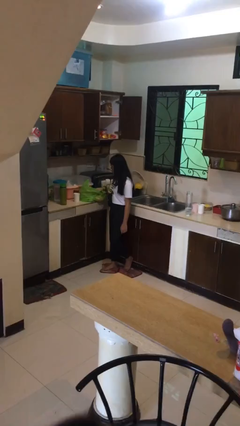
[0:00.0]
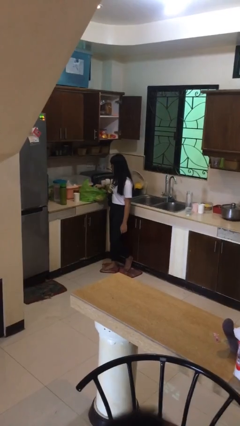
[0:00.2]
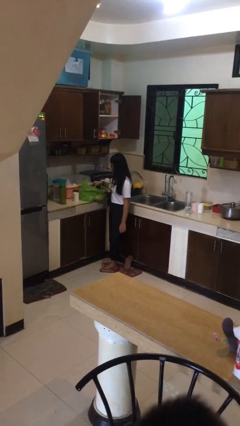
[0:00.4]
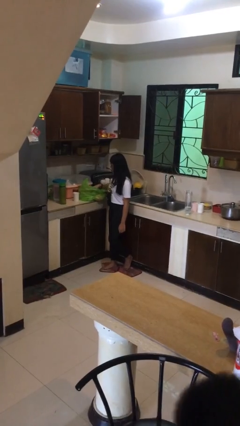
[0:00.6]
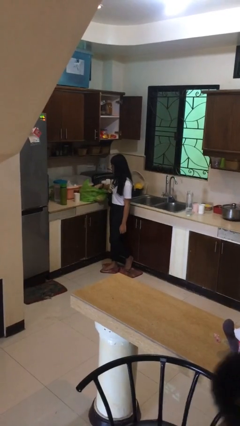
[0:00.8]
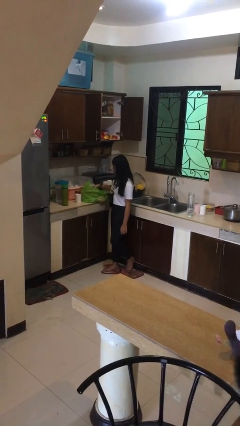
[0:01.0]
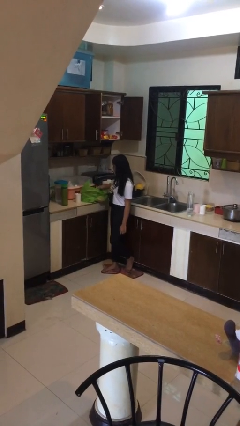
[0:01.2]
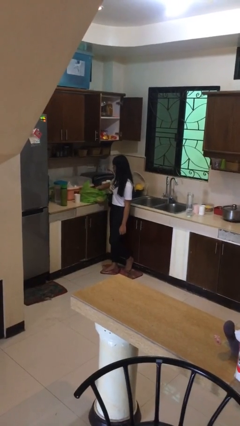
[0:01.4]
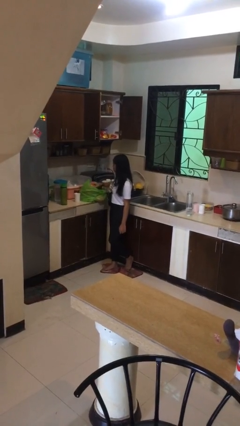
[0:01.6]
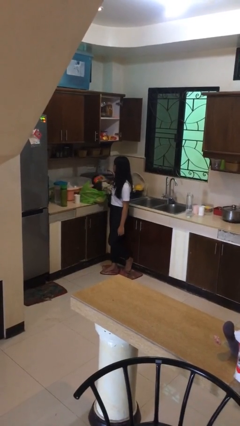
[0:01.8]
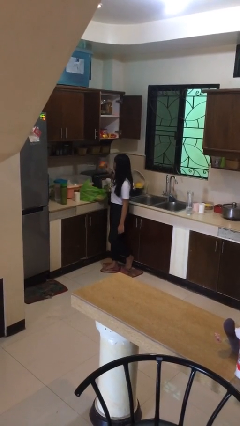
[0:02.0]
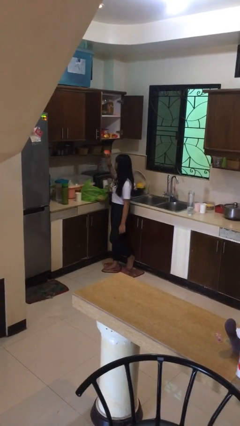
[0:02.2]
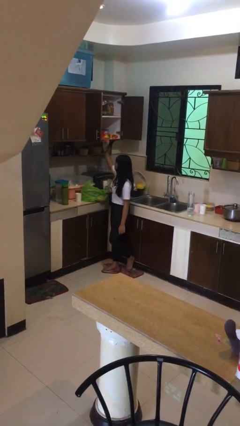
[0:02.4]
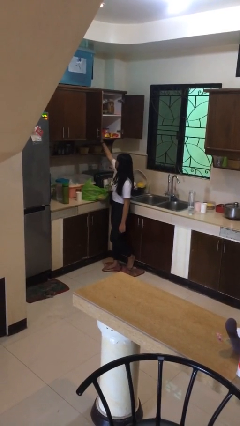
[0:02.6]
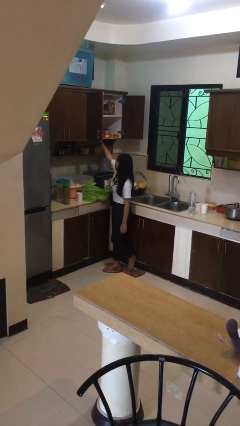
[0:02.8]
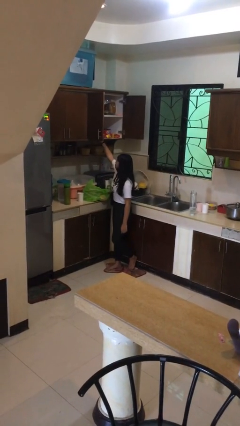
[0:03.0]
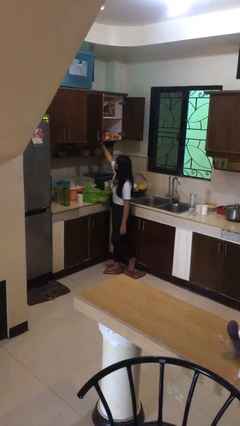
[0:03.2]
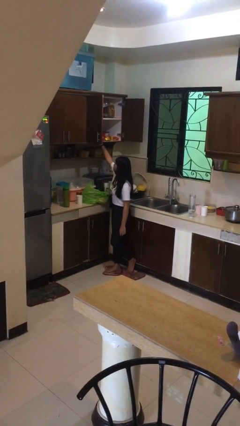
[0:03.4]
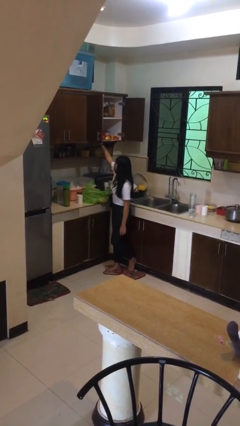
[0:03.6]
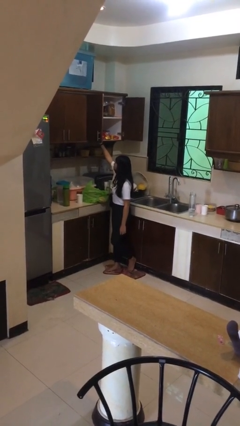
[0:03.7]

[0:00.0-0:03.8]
person loads groceries into cabinet

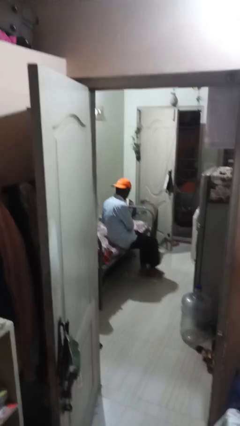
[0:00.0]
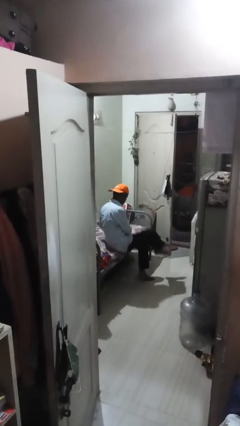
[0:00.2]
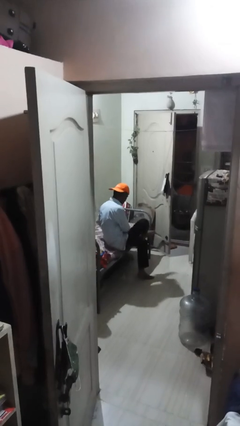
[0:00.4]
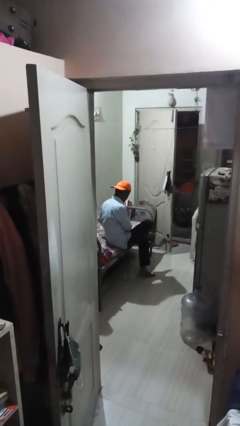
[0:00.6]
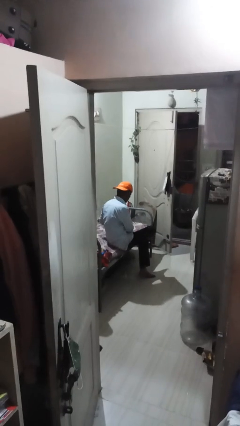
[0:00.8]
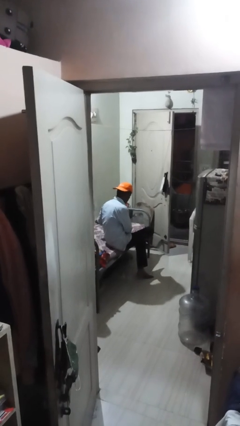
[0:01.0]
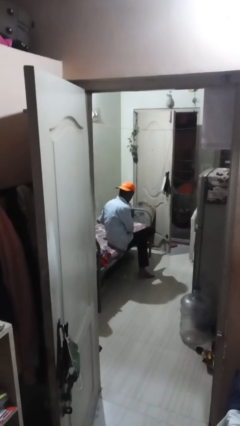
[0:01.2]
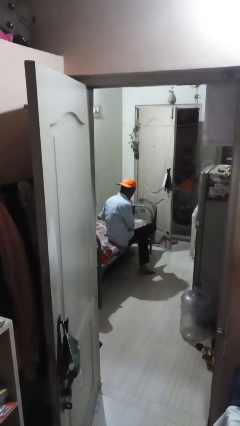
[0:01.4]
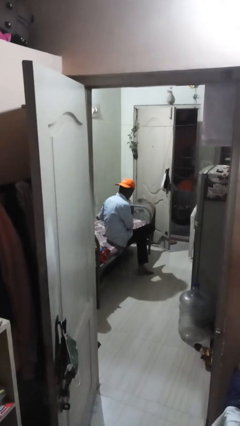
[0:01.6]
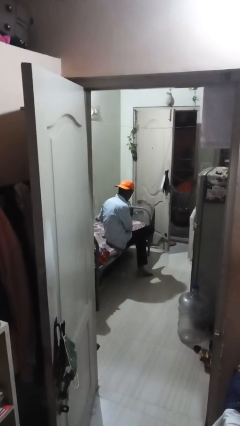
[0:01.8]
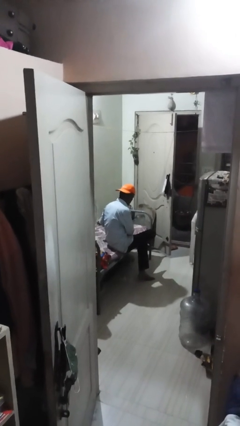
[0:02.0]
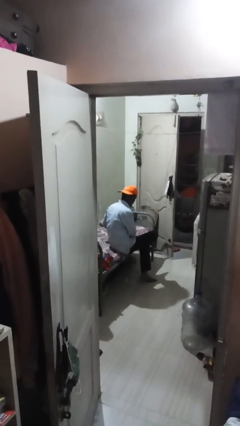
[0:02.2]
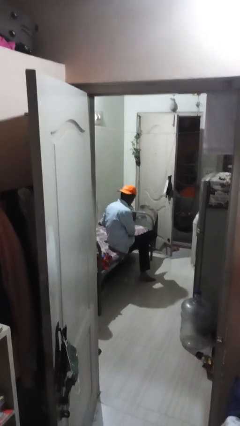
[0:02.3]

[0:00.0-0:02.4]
person crosses legs

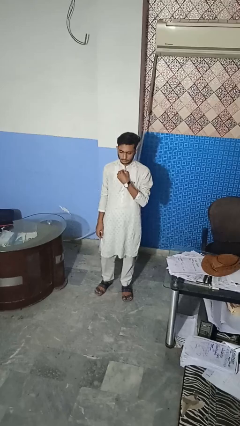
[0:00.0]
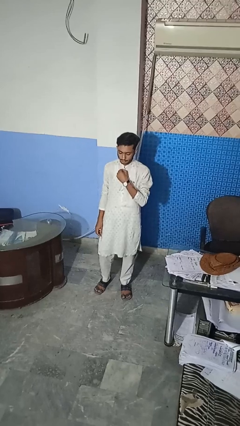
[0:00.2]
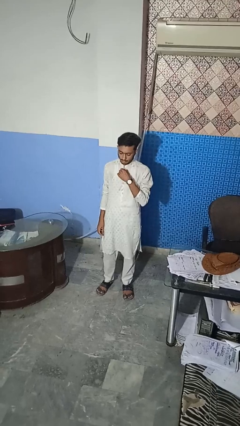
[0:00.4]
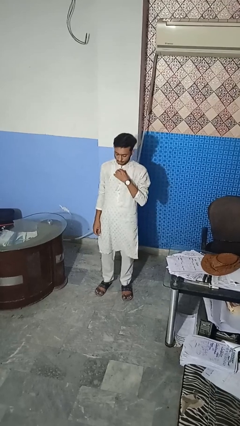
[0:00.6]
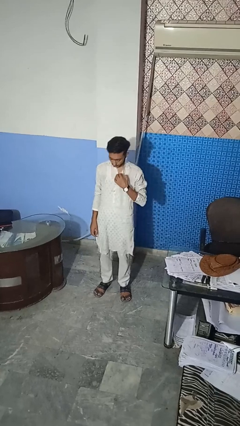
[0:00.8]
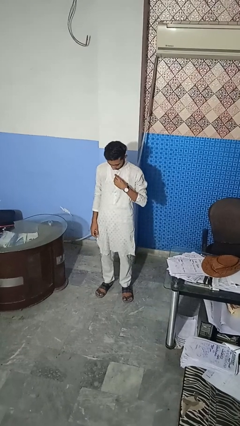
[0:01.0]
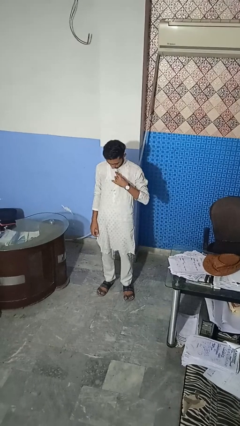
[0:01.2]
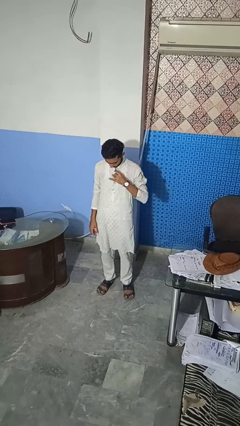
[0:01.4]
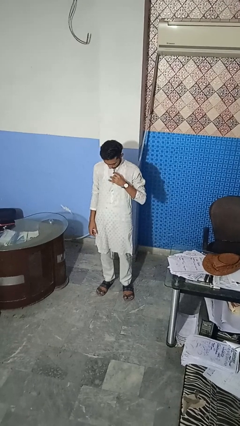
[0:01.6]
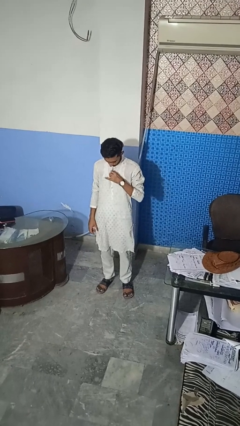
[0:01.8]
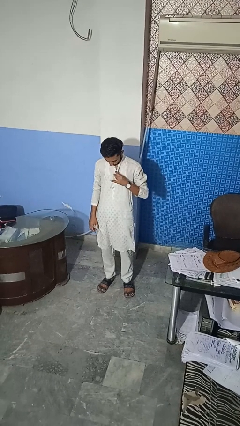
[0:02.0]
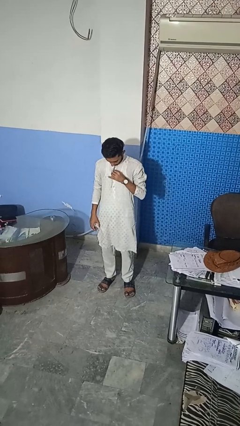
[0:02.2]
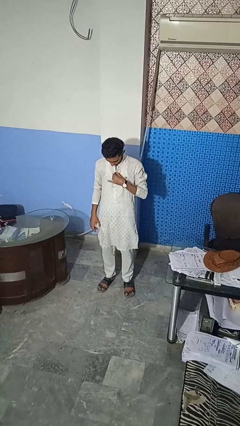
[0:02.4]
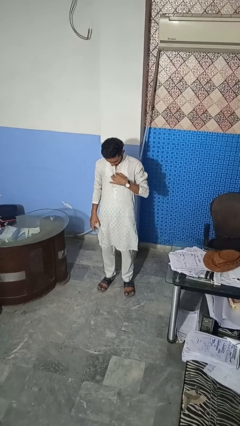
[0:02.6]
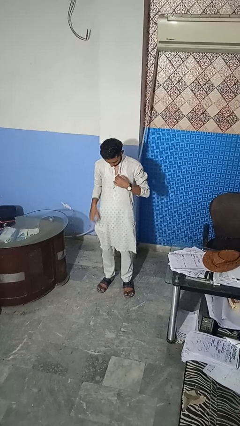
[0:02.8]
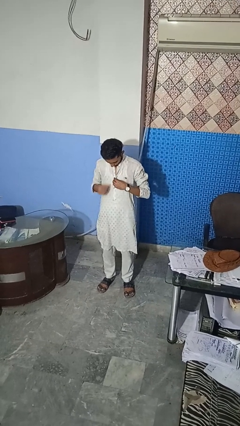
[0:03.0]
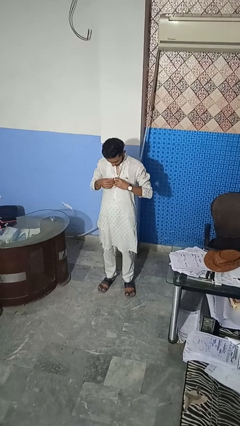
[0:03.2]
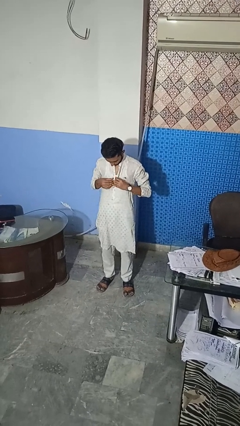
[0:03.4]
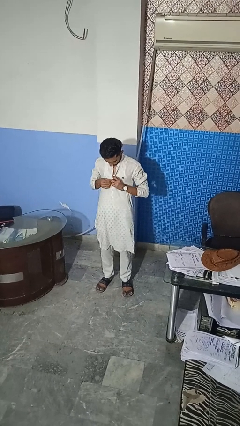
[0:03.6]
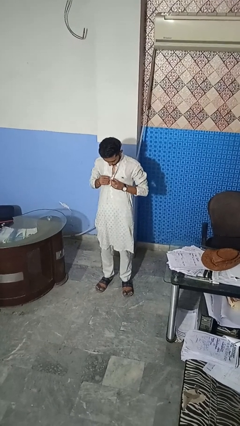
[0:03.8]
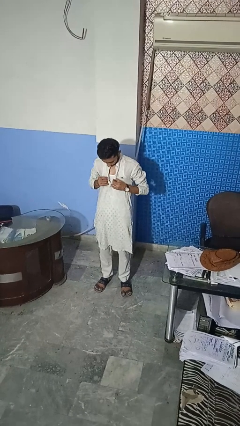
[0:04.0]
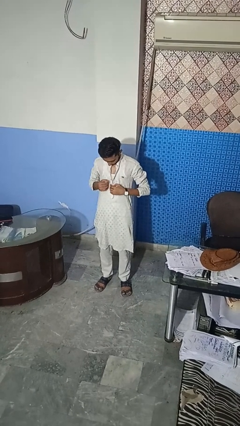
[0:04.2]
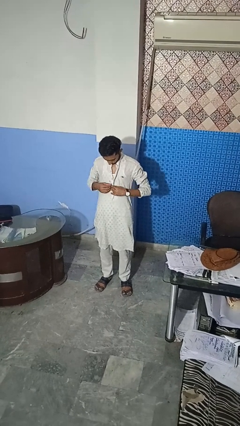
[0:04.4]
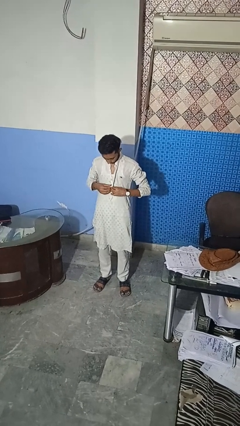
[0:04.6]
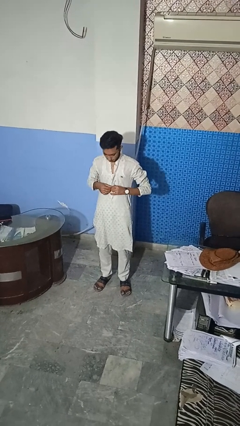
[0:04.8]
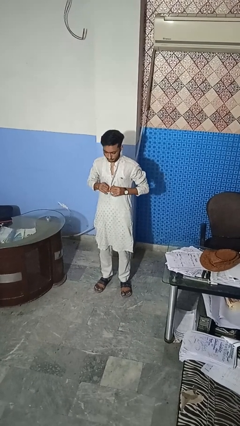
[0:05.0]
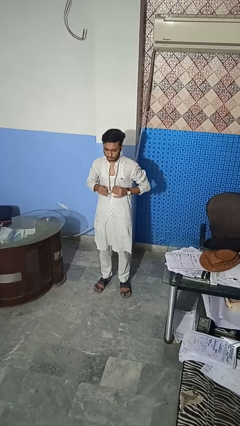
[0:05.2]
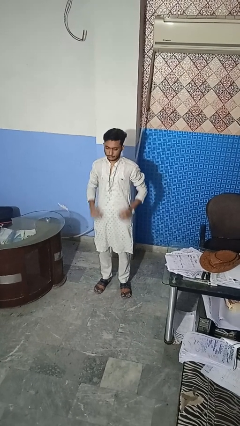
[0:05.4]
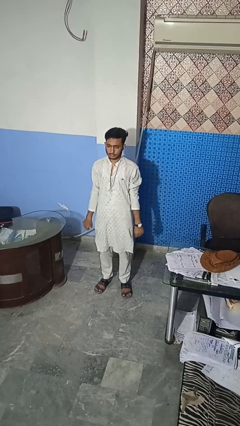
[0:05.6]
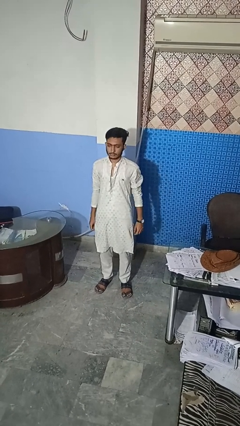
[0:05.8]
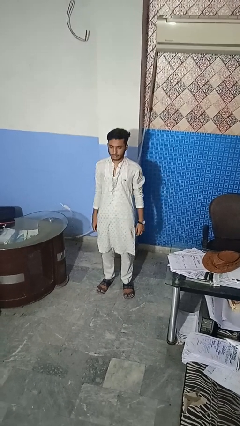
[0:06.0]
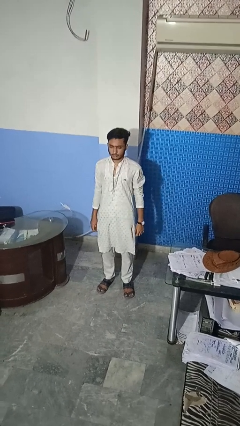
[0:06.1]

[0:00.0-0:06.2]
person unbuttons shirt

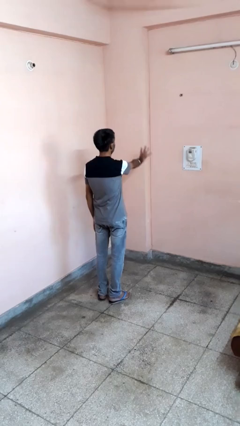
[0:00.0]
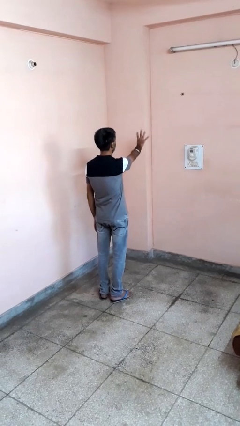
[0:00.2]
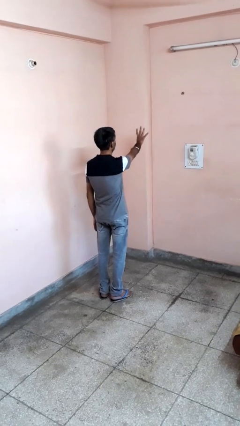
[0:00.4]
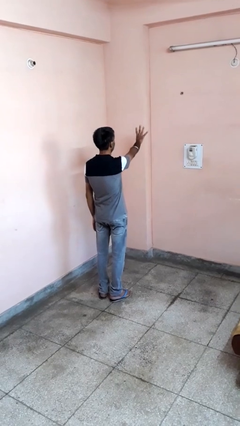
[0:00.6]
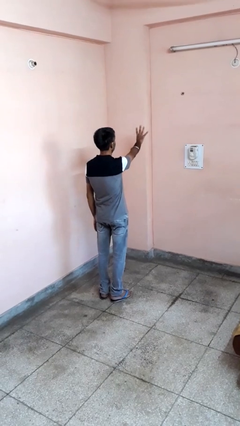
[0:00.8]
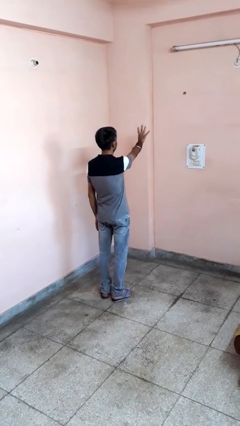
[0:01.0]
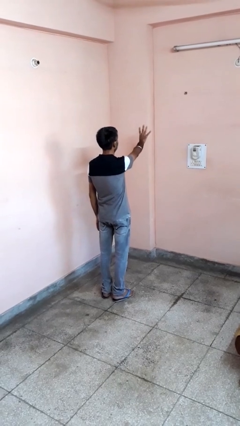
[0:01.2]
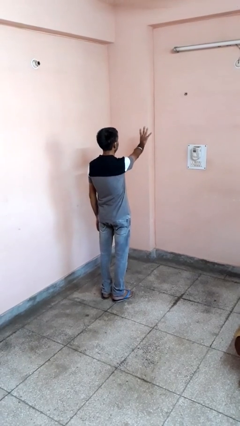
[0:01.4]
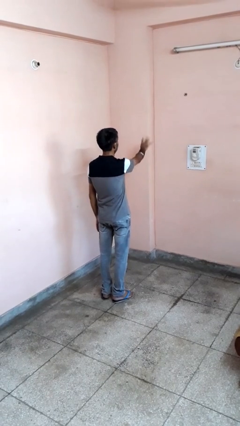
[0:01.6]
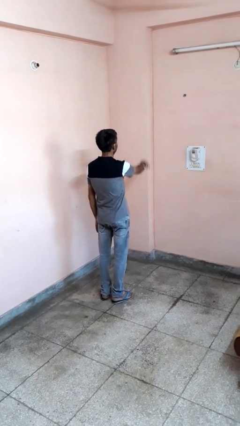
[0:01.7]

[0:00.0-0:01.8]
person gestures number four

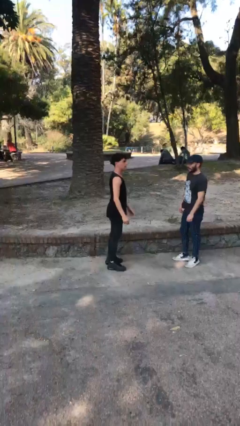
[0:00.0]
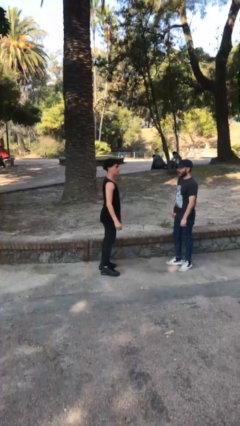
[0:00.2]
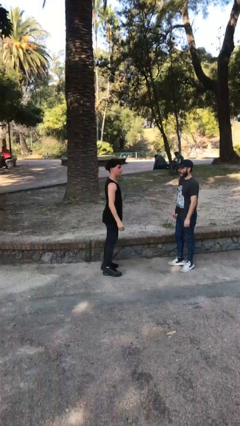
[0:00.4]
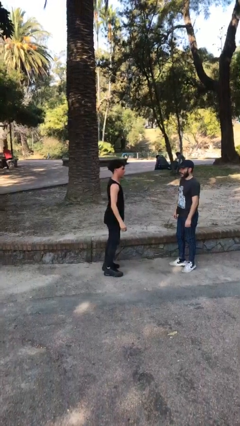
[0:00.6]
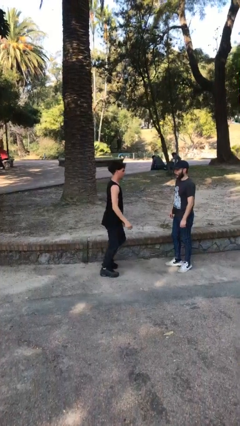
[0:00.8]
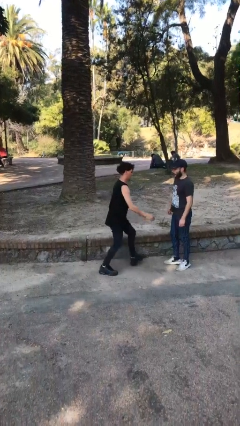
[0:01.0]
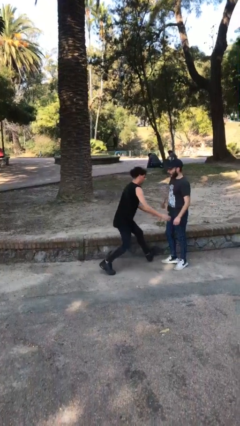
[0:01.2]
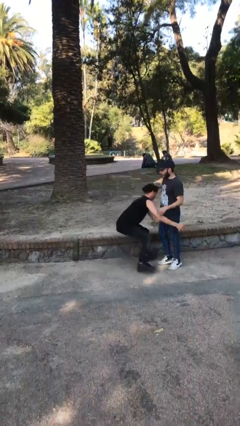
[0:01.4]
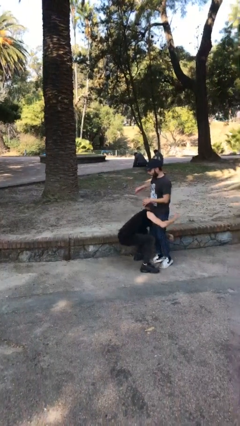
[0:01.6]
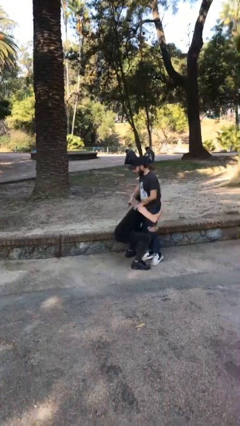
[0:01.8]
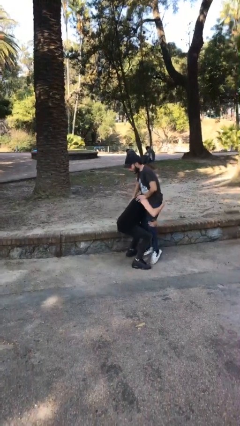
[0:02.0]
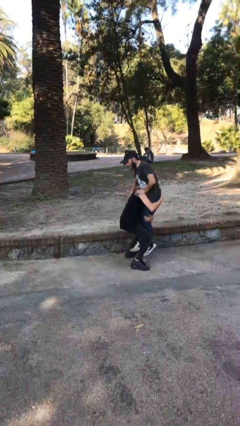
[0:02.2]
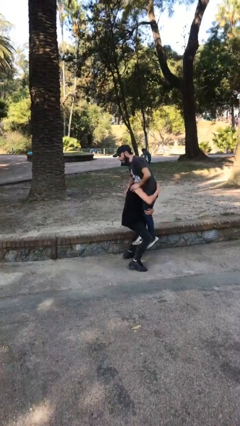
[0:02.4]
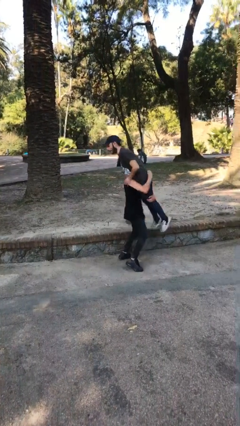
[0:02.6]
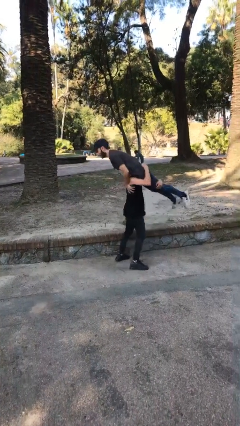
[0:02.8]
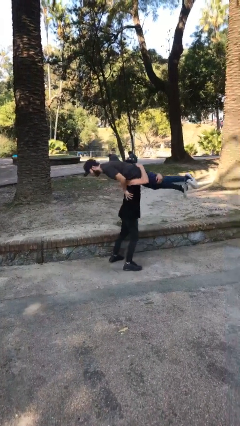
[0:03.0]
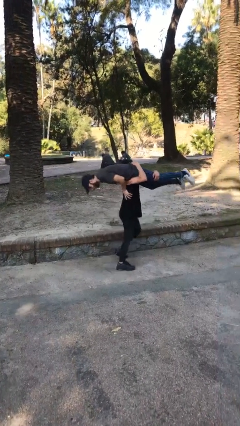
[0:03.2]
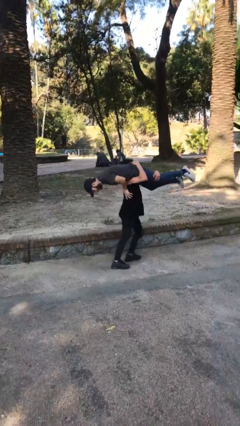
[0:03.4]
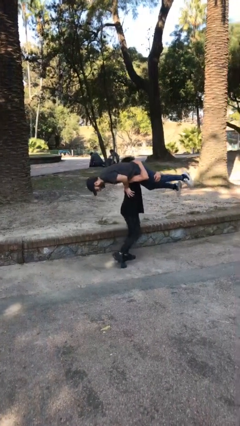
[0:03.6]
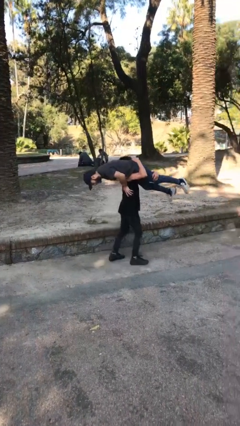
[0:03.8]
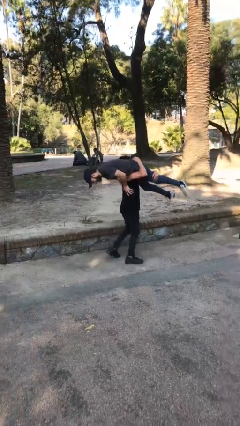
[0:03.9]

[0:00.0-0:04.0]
person carries person over shoulder
